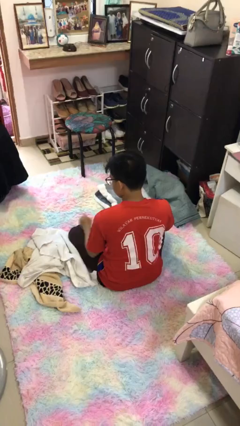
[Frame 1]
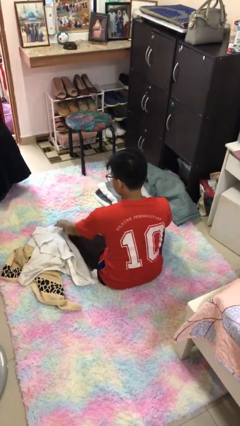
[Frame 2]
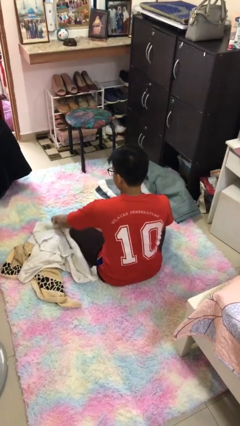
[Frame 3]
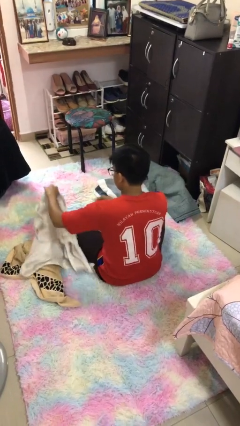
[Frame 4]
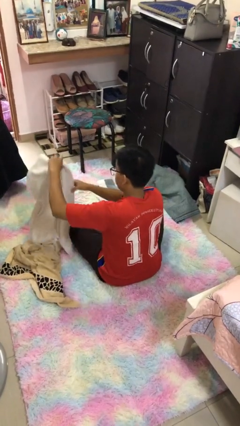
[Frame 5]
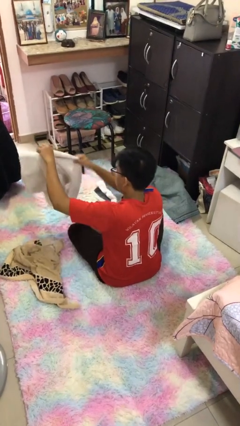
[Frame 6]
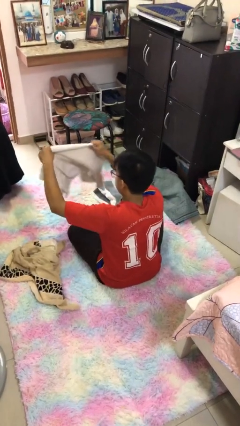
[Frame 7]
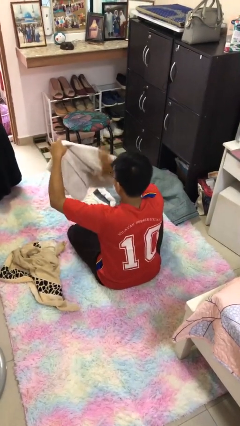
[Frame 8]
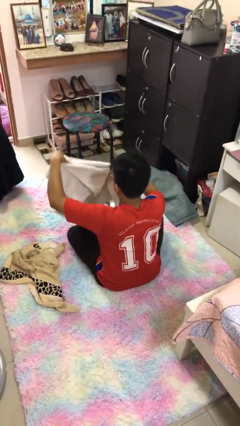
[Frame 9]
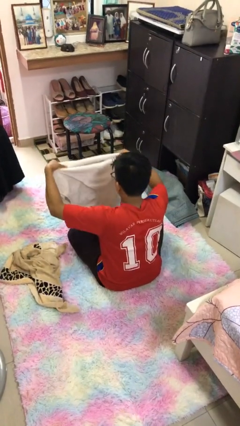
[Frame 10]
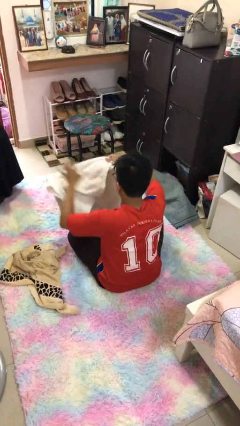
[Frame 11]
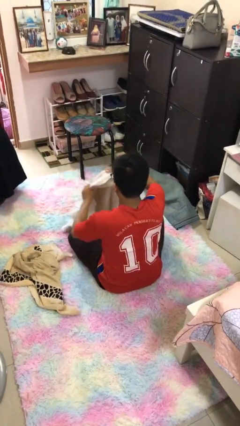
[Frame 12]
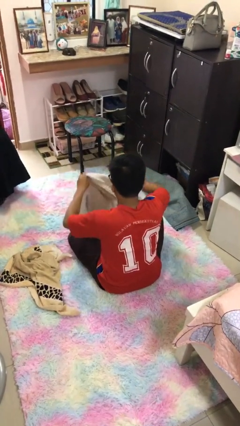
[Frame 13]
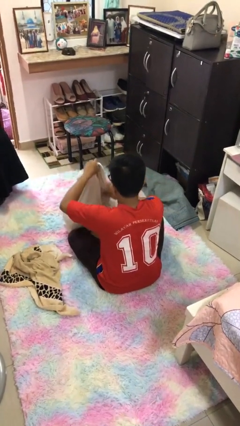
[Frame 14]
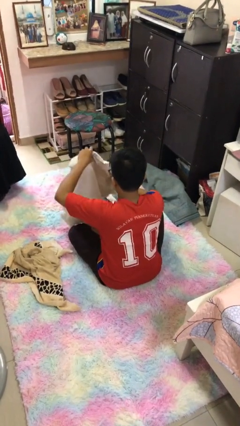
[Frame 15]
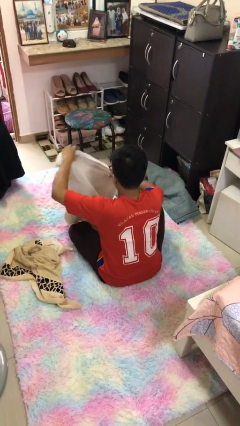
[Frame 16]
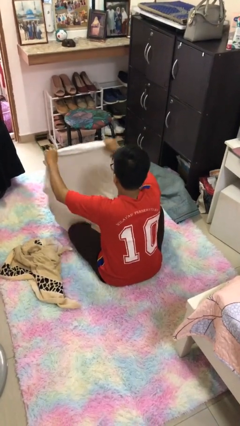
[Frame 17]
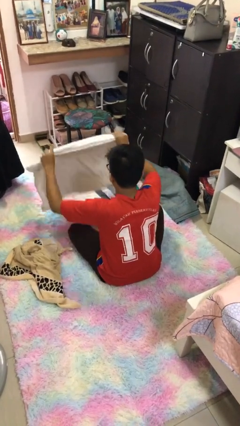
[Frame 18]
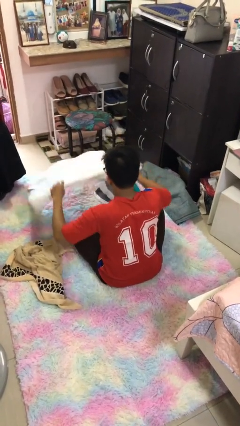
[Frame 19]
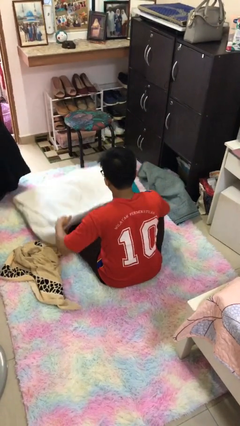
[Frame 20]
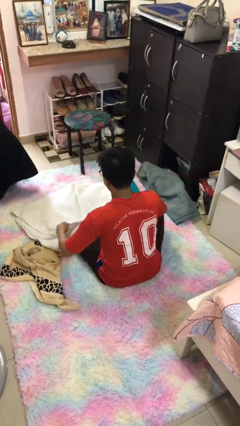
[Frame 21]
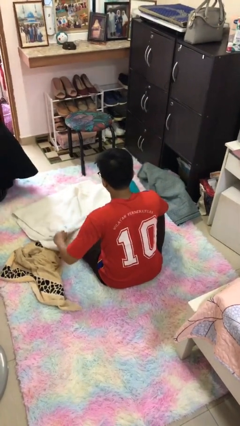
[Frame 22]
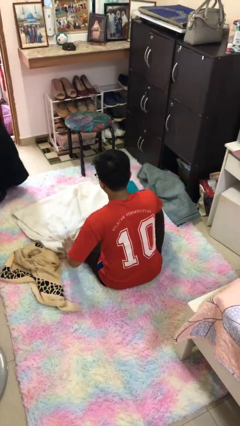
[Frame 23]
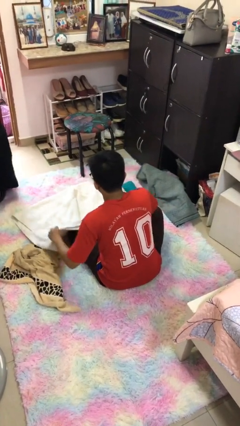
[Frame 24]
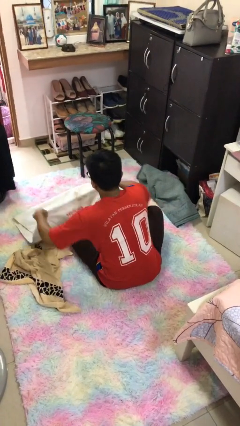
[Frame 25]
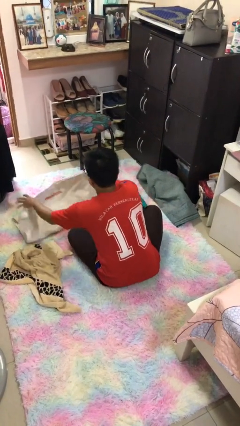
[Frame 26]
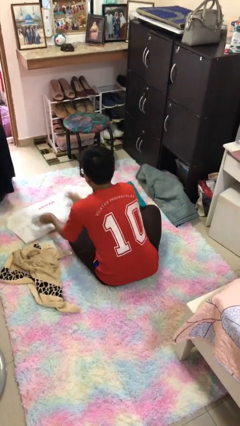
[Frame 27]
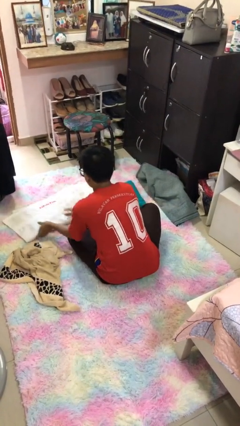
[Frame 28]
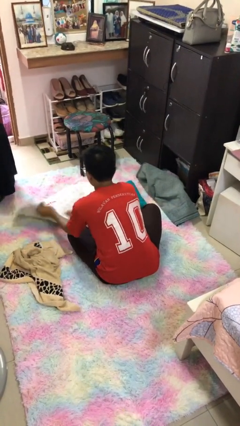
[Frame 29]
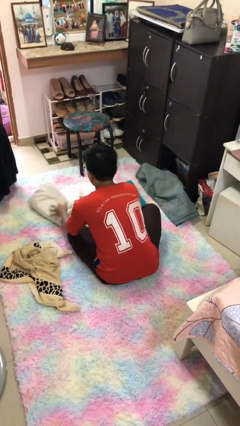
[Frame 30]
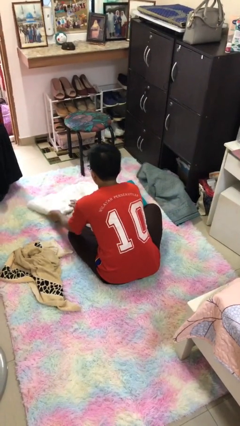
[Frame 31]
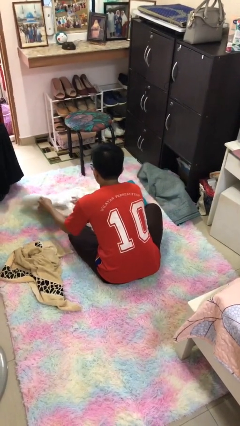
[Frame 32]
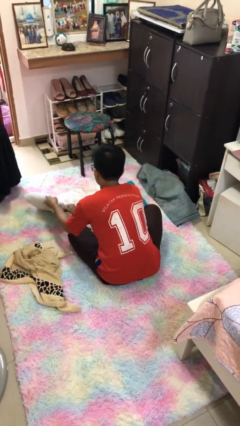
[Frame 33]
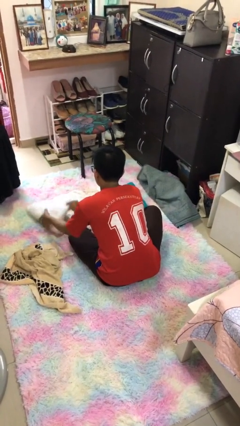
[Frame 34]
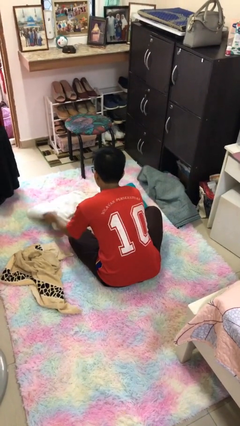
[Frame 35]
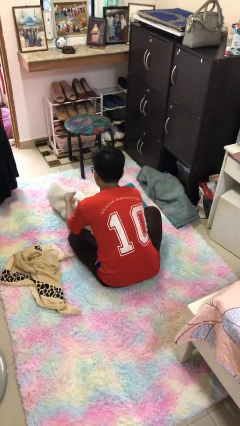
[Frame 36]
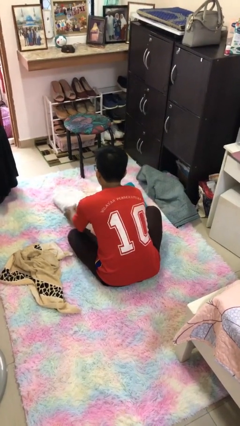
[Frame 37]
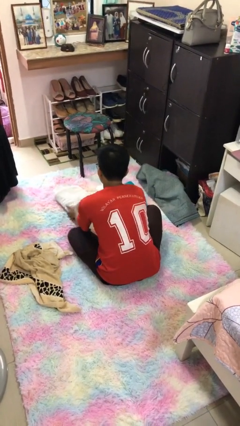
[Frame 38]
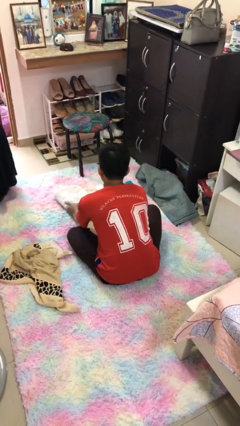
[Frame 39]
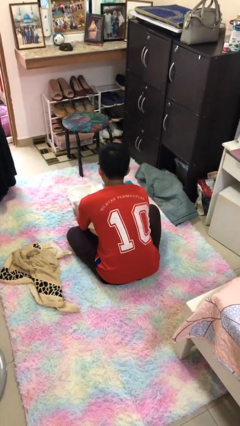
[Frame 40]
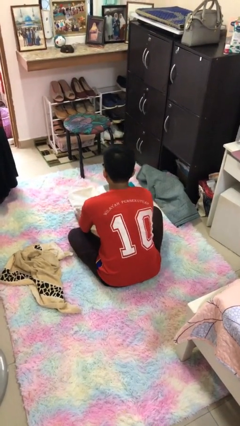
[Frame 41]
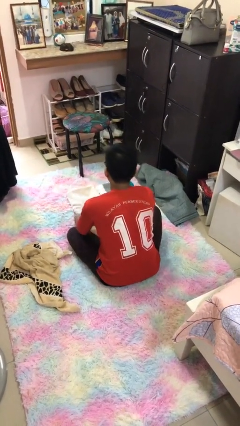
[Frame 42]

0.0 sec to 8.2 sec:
person folds towel

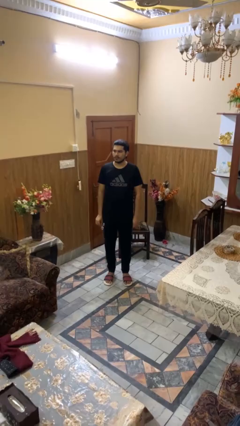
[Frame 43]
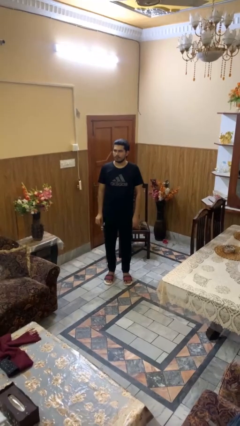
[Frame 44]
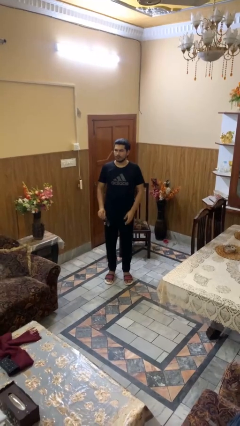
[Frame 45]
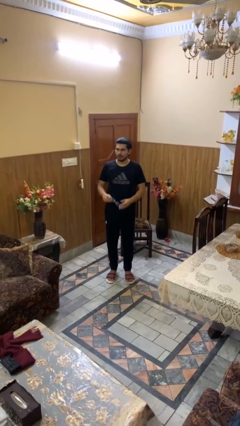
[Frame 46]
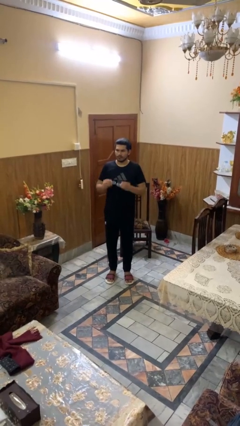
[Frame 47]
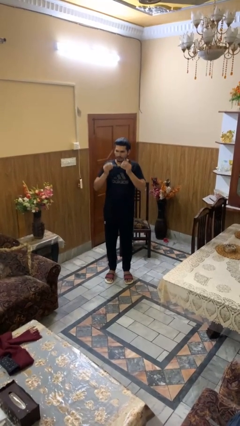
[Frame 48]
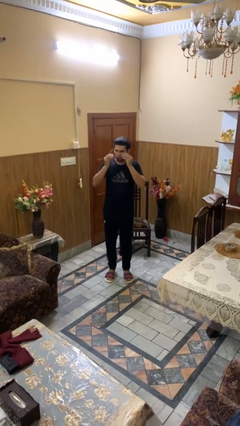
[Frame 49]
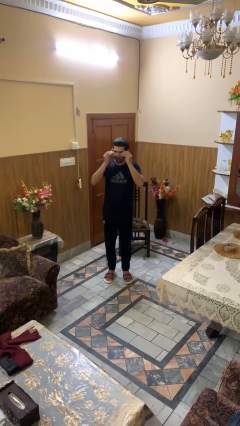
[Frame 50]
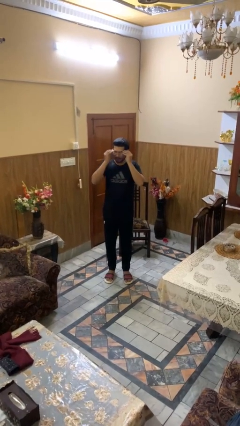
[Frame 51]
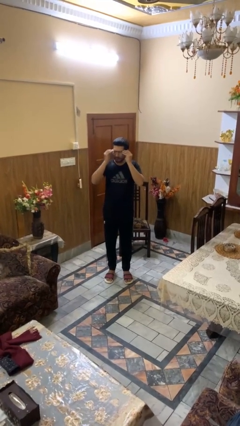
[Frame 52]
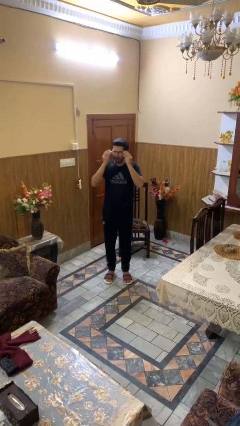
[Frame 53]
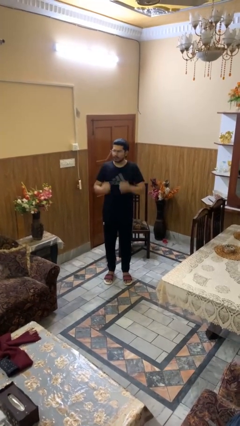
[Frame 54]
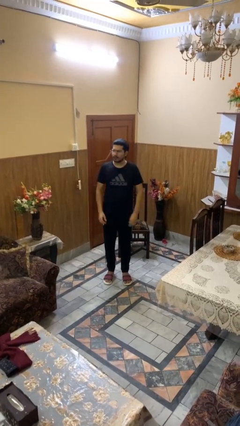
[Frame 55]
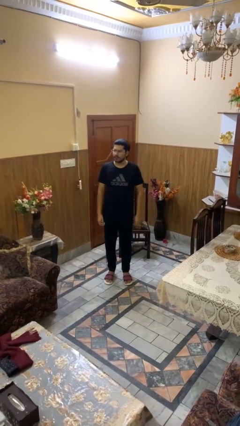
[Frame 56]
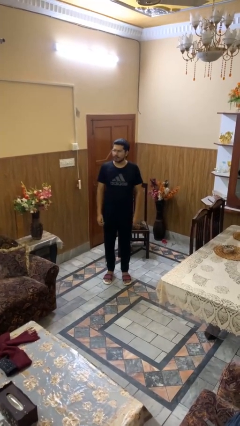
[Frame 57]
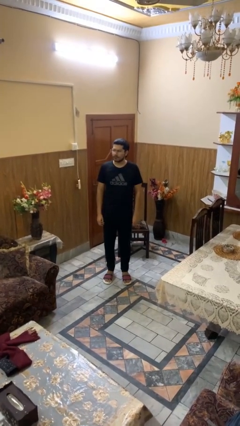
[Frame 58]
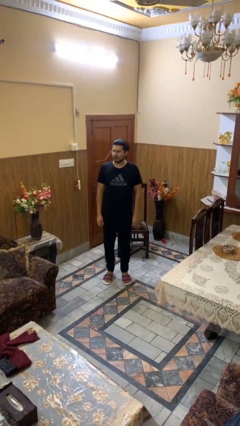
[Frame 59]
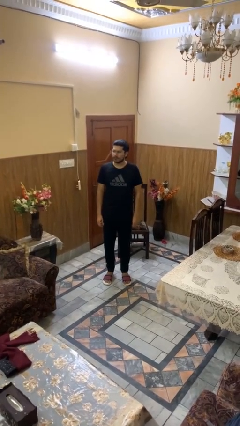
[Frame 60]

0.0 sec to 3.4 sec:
person puts on glasses

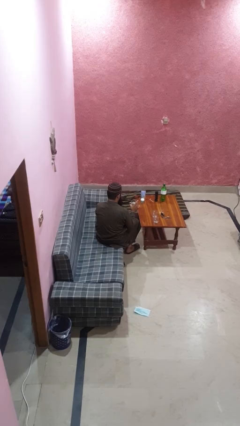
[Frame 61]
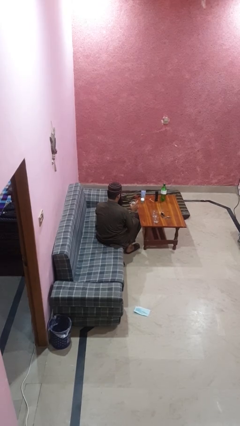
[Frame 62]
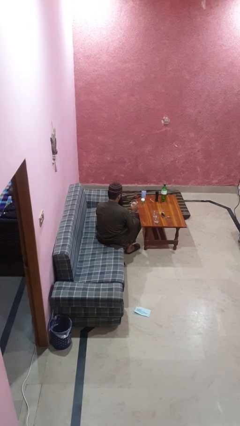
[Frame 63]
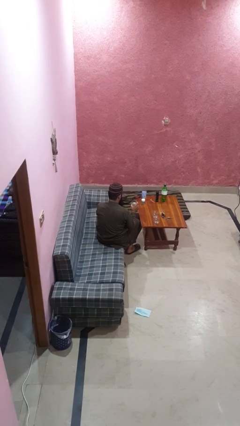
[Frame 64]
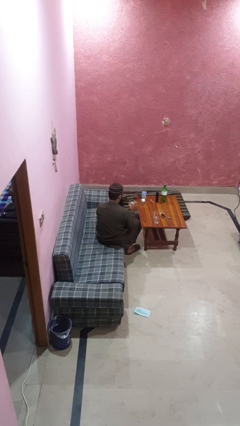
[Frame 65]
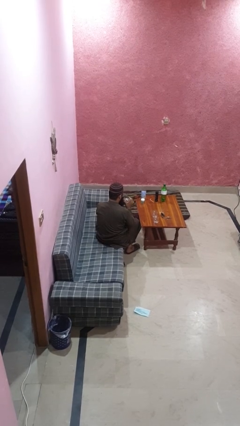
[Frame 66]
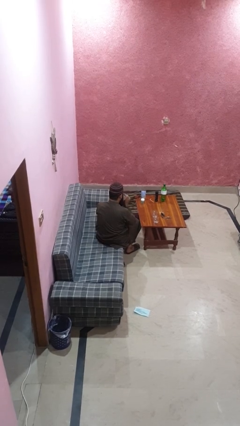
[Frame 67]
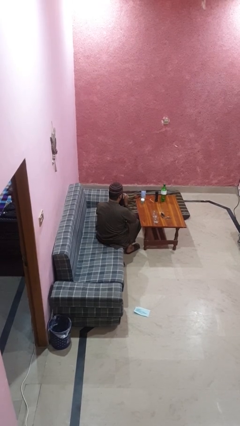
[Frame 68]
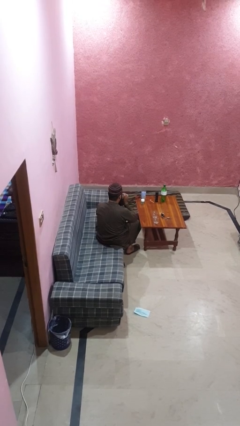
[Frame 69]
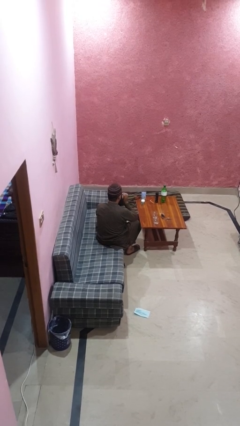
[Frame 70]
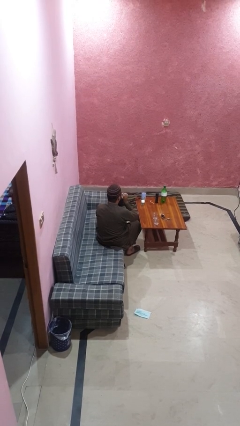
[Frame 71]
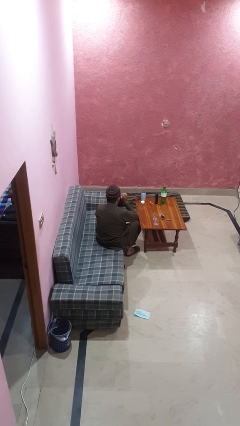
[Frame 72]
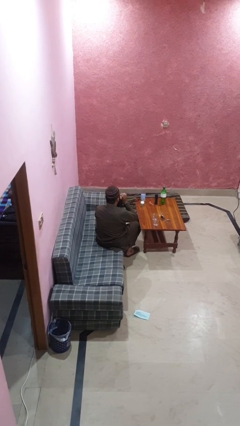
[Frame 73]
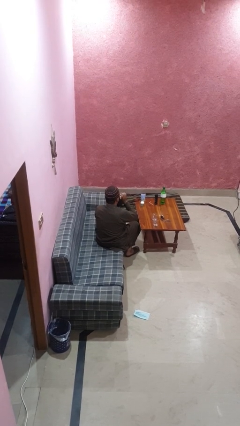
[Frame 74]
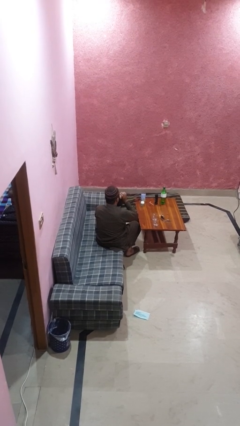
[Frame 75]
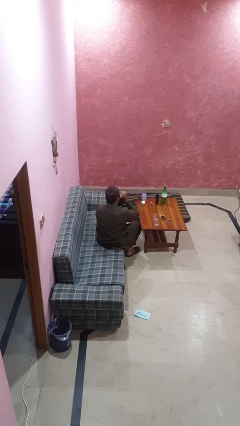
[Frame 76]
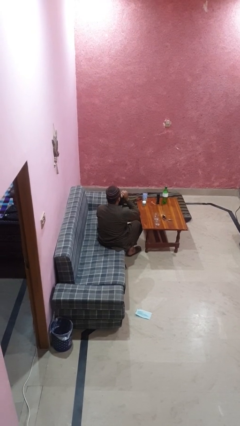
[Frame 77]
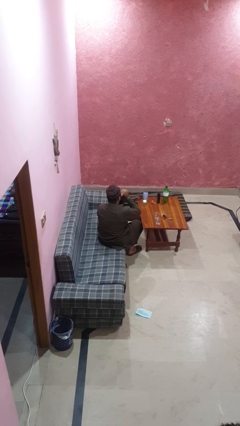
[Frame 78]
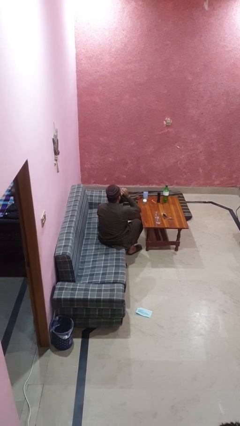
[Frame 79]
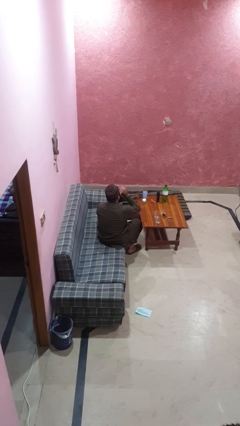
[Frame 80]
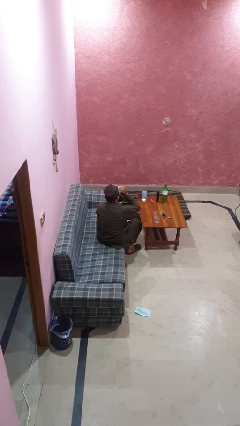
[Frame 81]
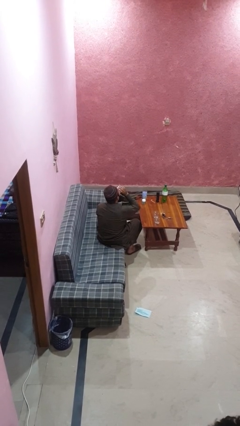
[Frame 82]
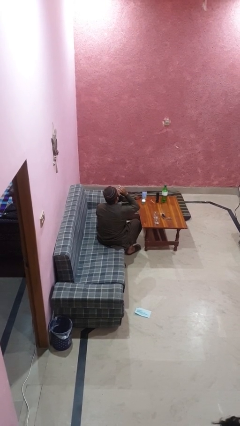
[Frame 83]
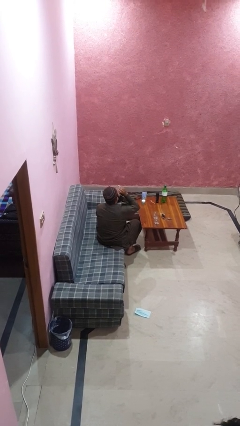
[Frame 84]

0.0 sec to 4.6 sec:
person drinks from shotglass

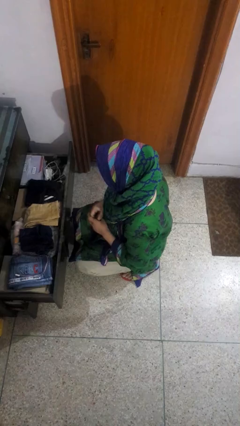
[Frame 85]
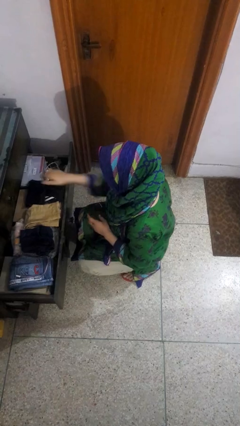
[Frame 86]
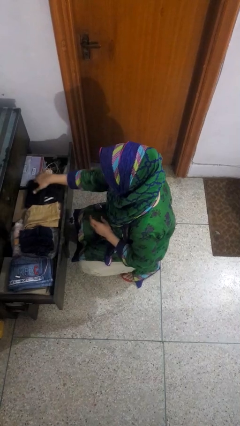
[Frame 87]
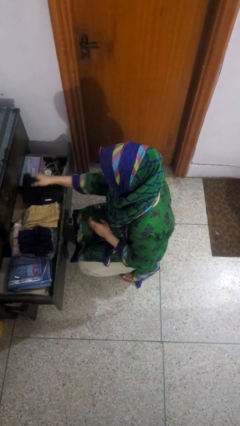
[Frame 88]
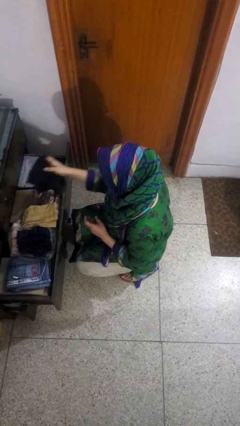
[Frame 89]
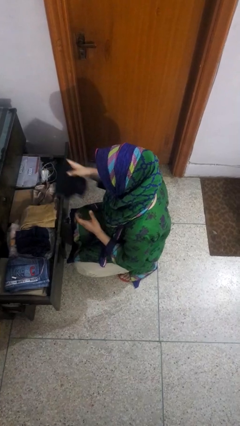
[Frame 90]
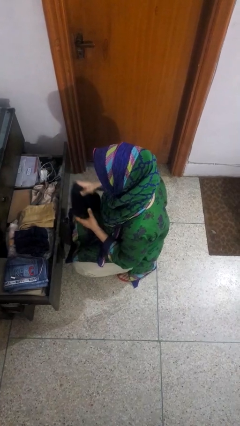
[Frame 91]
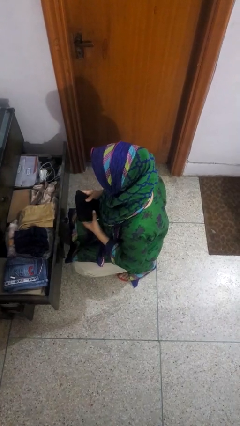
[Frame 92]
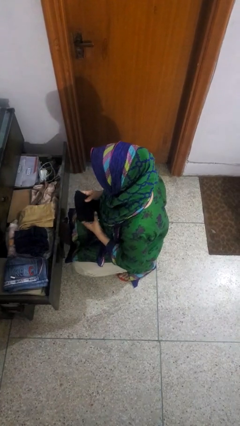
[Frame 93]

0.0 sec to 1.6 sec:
person takes clothes from dresser
